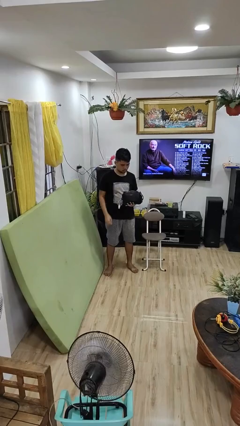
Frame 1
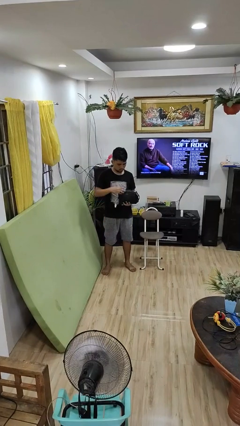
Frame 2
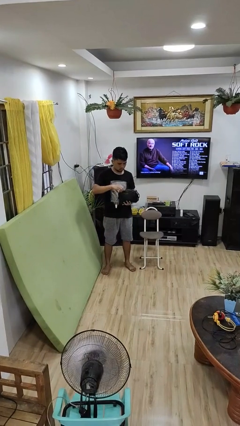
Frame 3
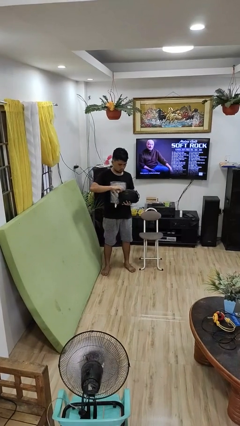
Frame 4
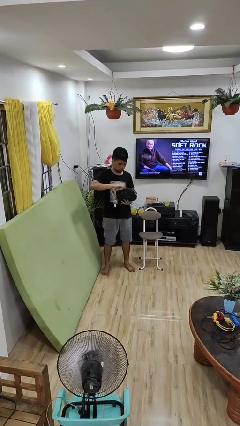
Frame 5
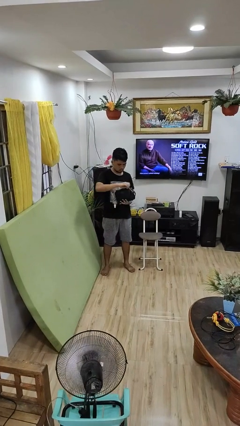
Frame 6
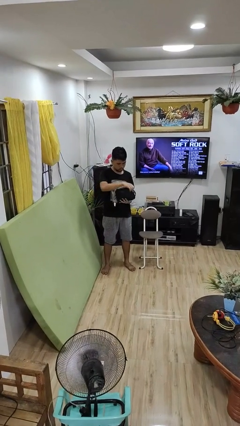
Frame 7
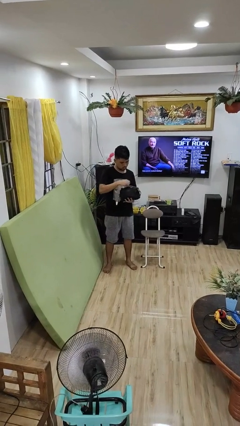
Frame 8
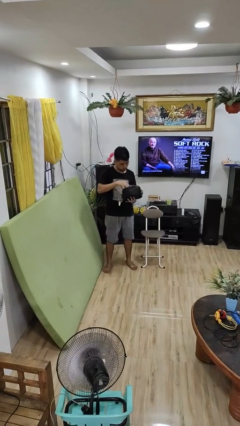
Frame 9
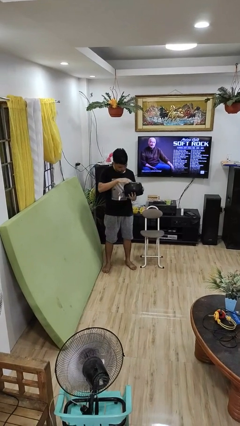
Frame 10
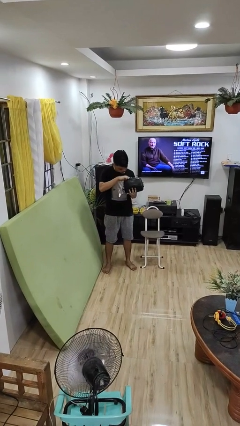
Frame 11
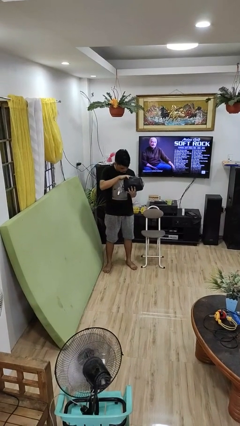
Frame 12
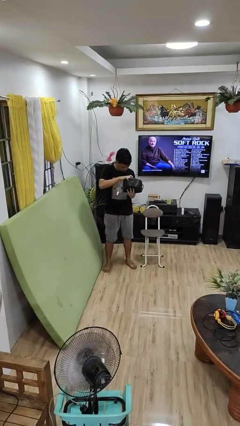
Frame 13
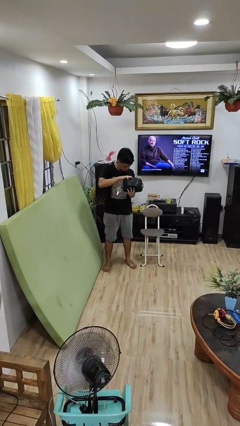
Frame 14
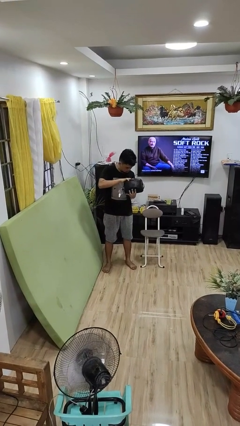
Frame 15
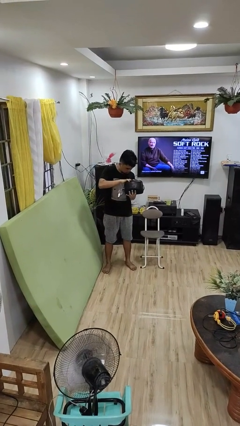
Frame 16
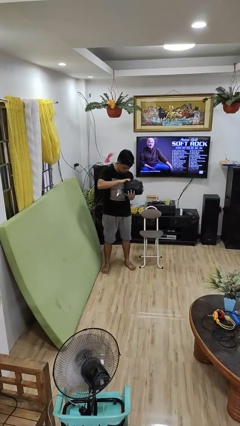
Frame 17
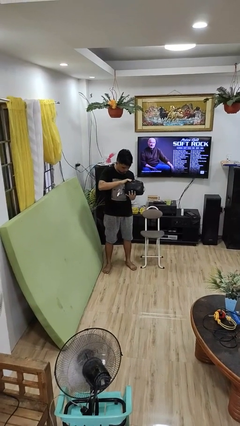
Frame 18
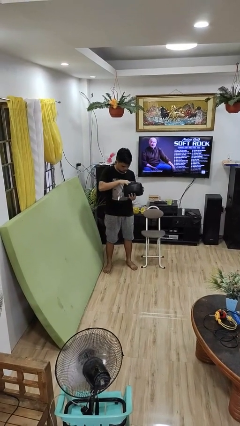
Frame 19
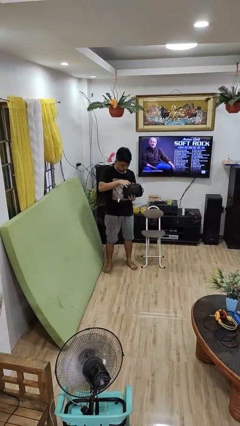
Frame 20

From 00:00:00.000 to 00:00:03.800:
person searches in purse

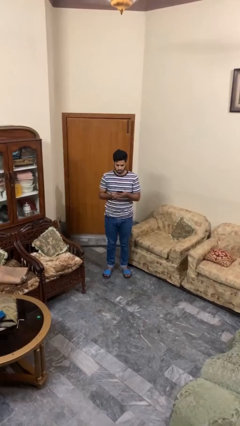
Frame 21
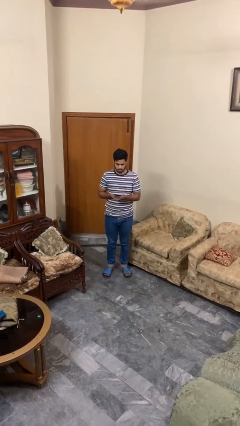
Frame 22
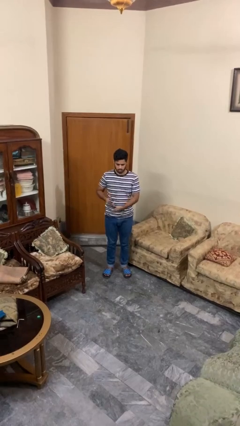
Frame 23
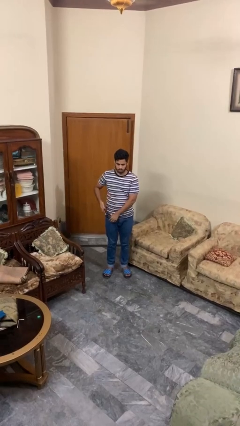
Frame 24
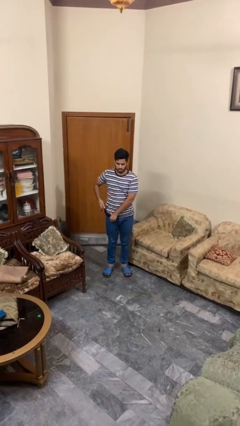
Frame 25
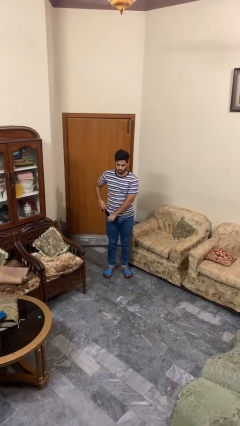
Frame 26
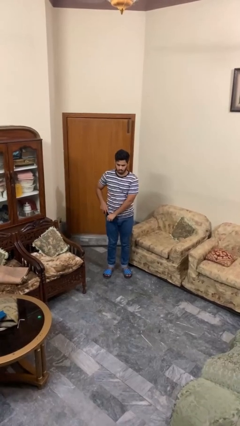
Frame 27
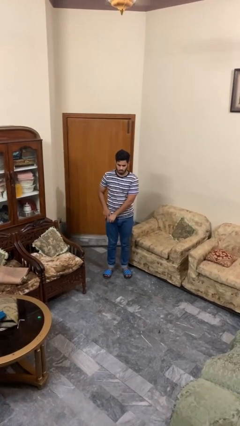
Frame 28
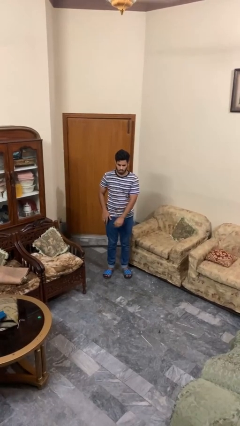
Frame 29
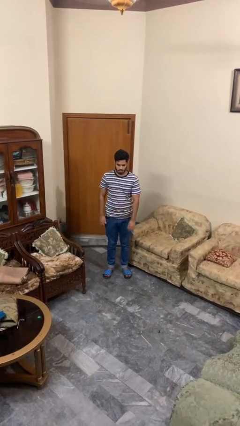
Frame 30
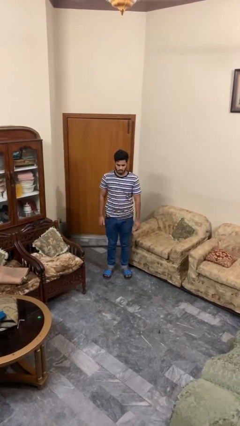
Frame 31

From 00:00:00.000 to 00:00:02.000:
person puts phone into pocket

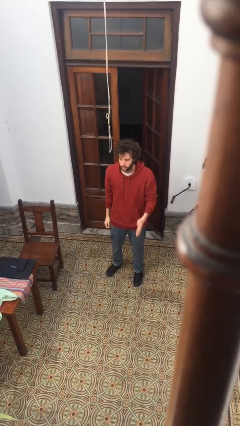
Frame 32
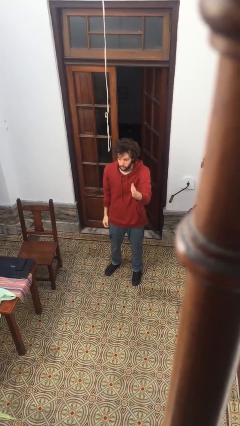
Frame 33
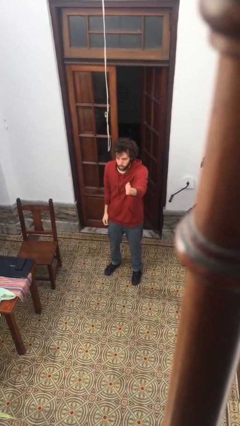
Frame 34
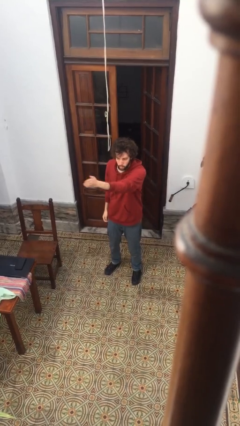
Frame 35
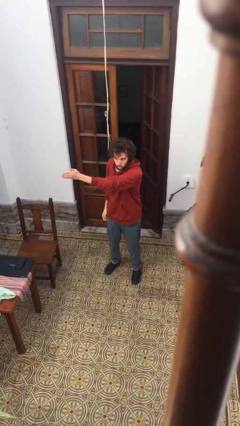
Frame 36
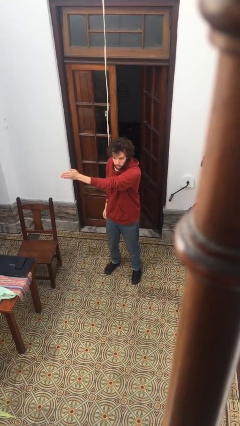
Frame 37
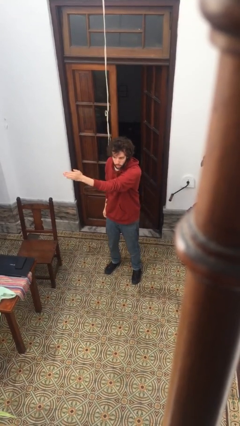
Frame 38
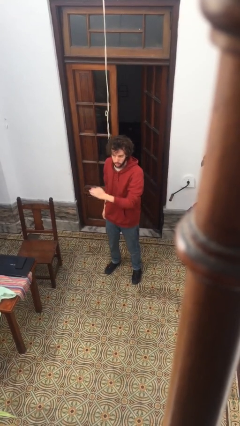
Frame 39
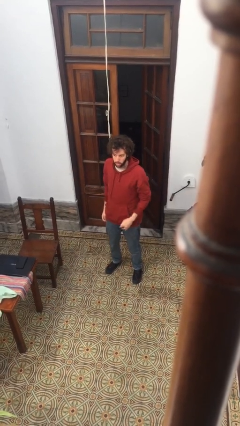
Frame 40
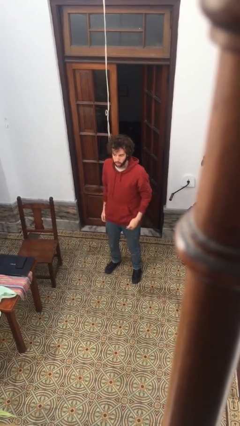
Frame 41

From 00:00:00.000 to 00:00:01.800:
person gestures swipe right

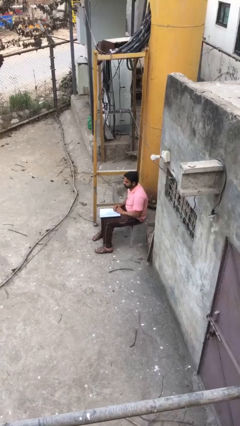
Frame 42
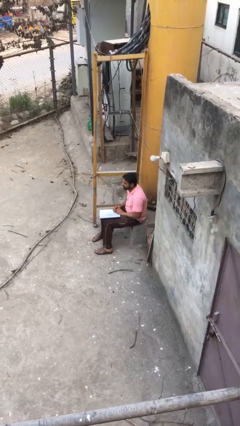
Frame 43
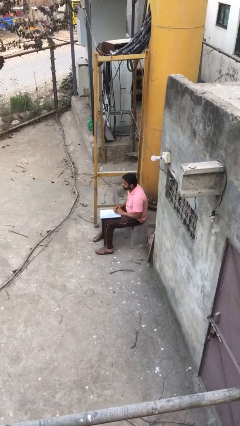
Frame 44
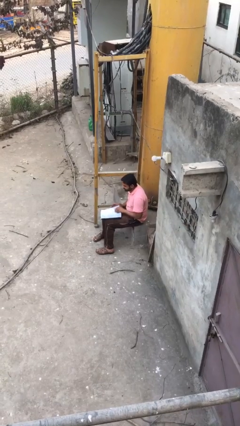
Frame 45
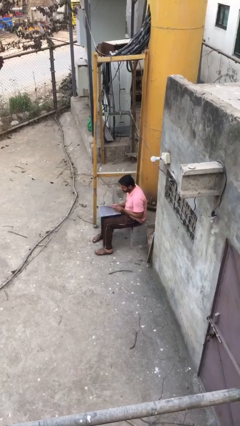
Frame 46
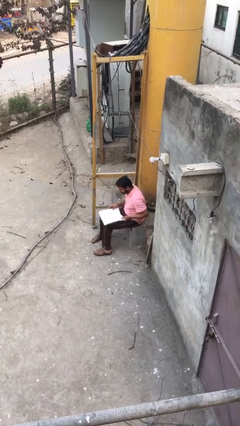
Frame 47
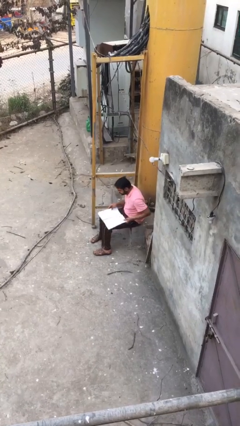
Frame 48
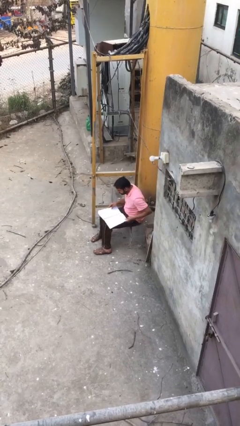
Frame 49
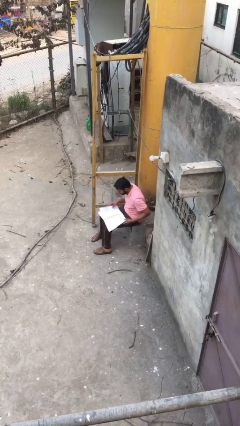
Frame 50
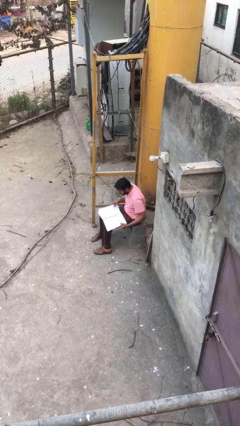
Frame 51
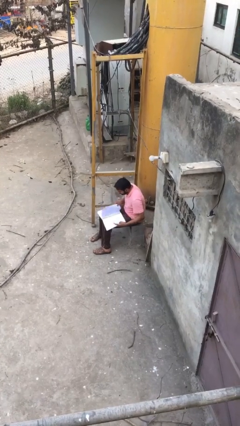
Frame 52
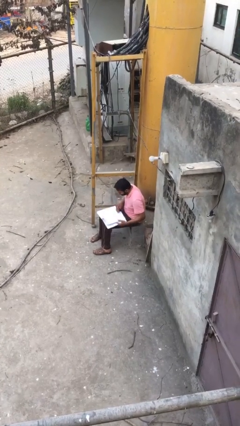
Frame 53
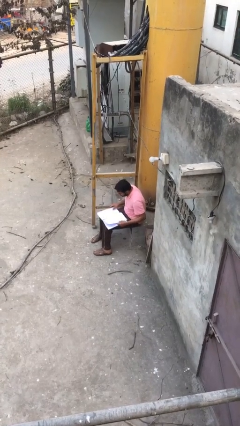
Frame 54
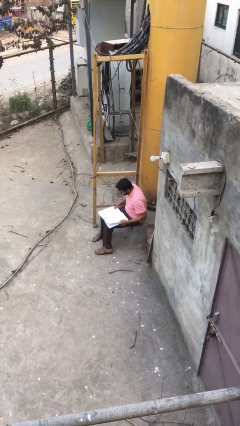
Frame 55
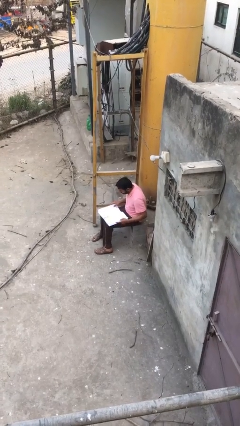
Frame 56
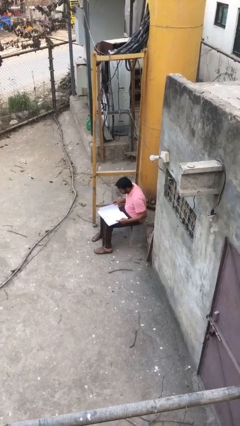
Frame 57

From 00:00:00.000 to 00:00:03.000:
person reads document

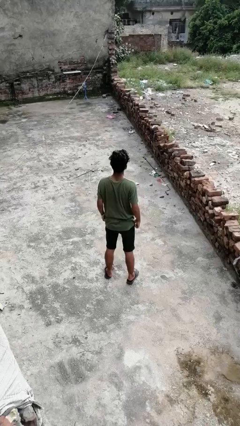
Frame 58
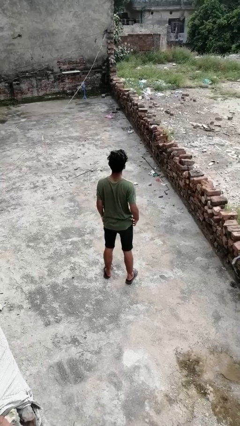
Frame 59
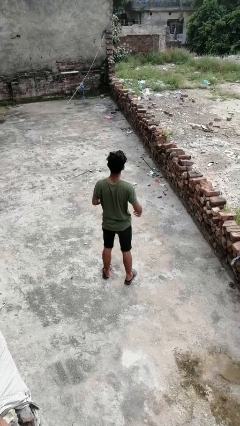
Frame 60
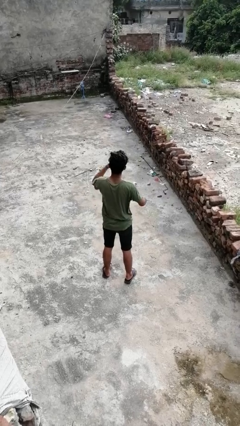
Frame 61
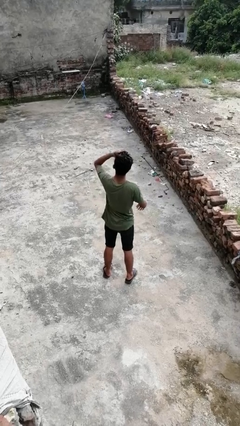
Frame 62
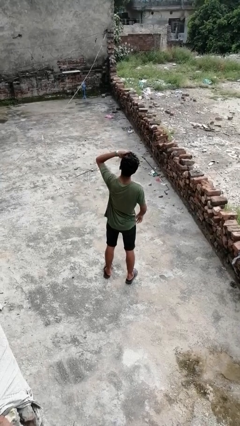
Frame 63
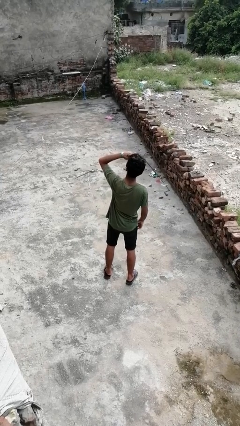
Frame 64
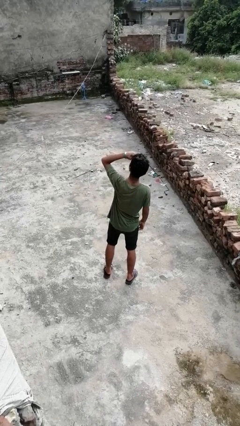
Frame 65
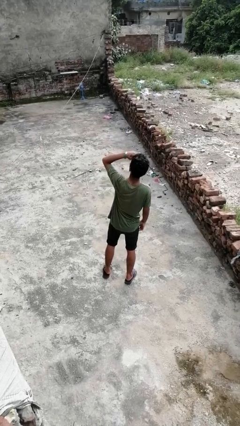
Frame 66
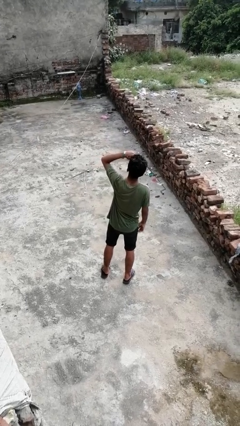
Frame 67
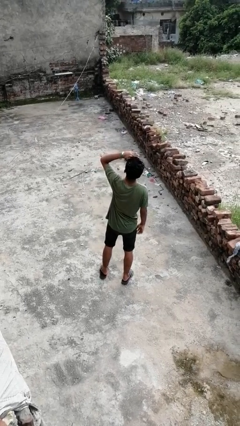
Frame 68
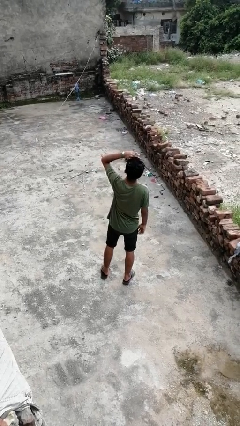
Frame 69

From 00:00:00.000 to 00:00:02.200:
person shades eyes

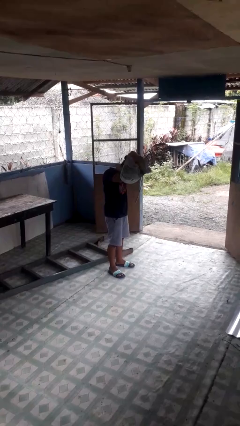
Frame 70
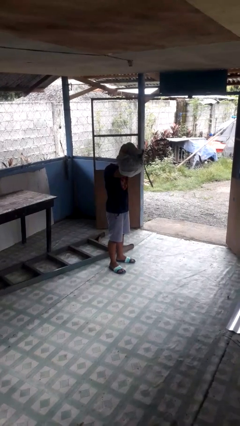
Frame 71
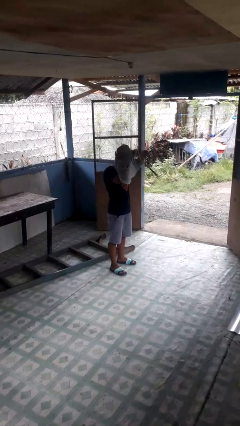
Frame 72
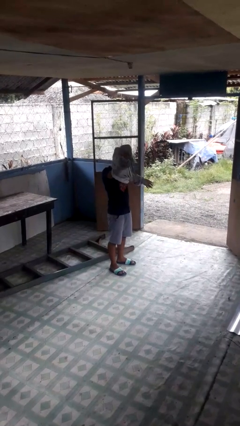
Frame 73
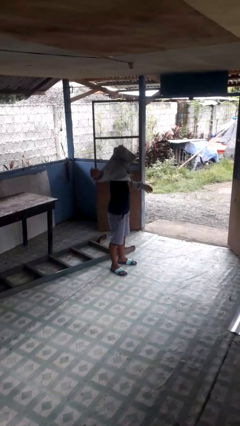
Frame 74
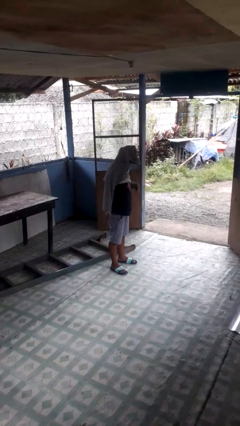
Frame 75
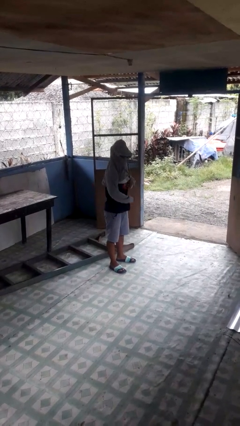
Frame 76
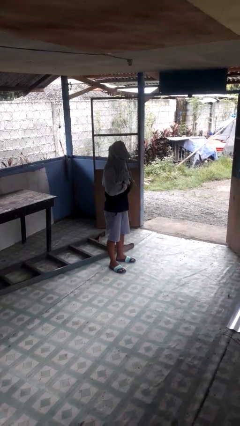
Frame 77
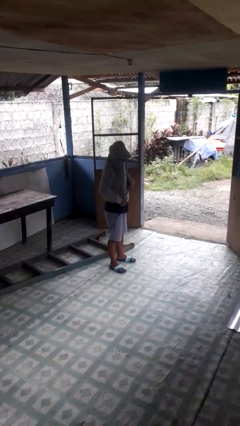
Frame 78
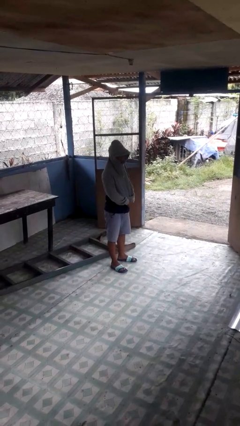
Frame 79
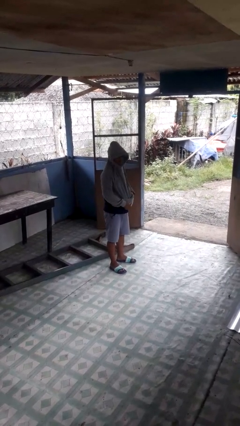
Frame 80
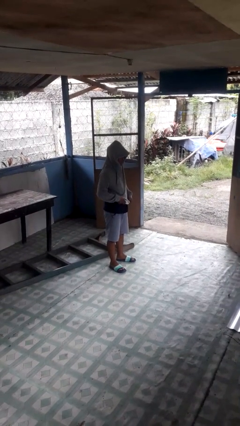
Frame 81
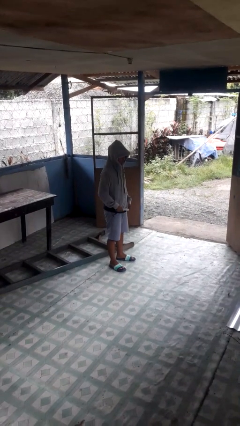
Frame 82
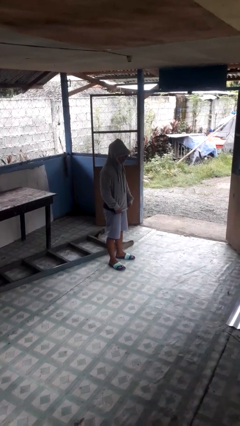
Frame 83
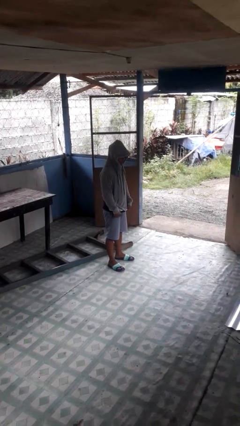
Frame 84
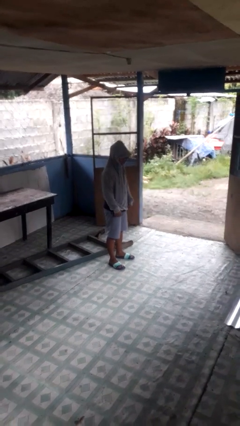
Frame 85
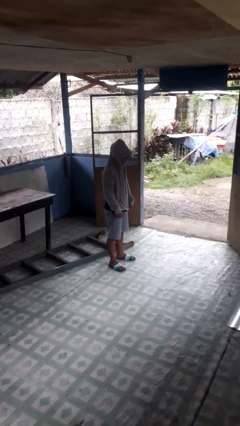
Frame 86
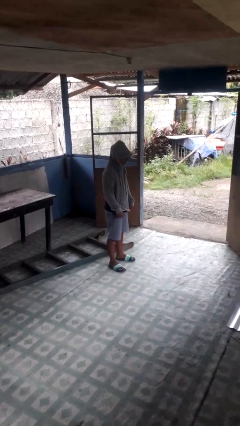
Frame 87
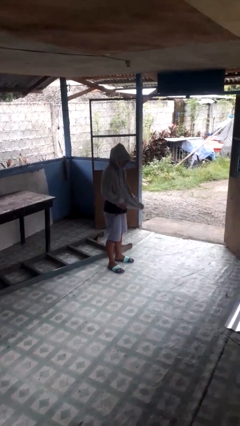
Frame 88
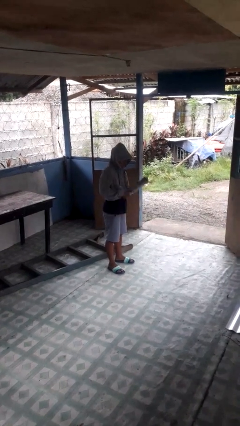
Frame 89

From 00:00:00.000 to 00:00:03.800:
person puts on hoodie

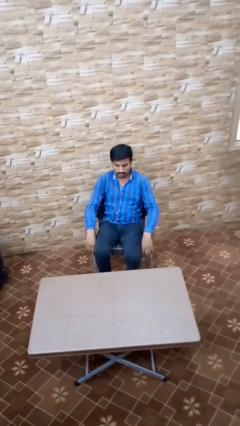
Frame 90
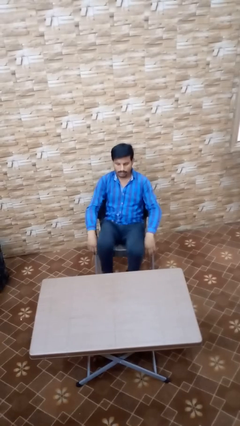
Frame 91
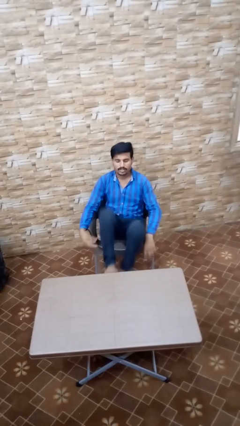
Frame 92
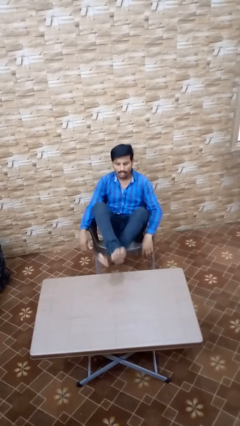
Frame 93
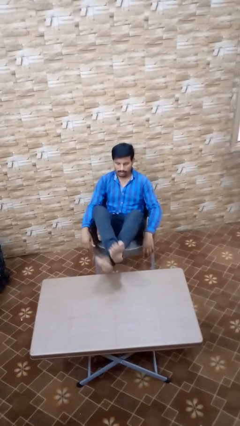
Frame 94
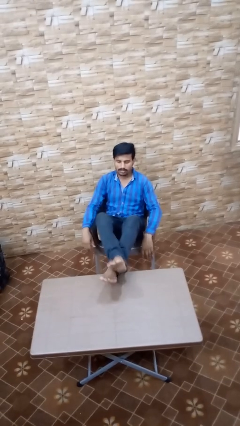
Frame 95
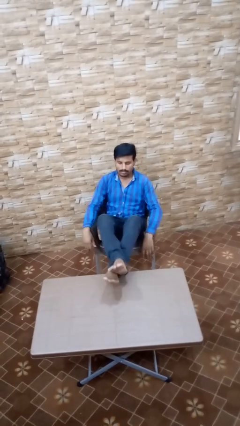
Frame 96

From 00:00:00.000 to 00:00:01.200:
person puts feet up
